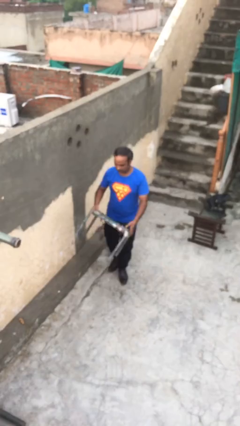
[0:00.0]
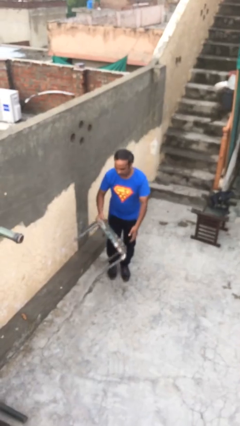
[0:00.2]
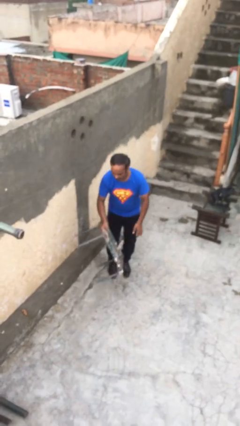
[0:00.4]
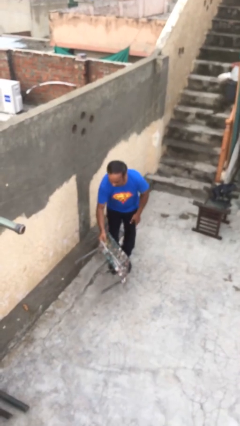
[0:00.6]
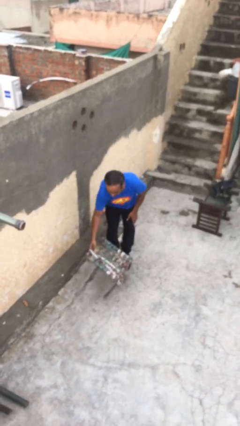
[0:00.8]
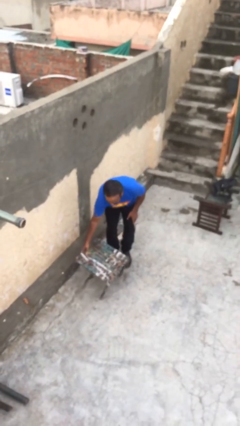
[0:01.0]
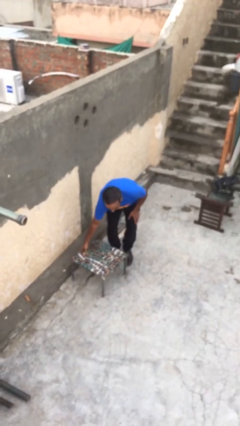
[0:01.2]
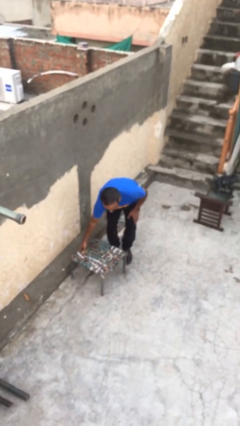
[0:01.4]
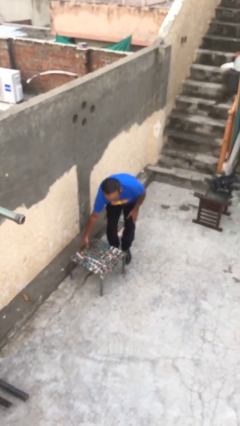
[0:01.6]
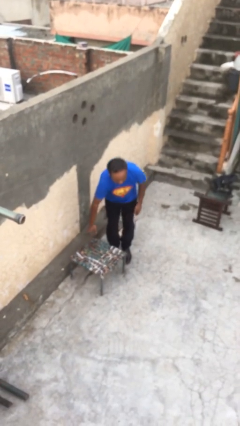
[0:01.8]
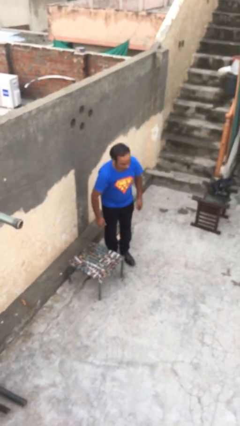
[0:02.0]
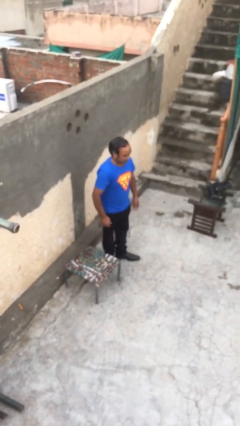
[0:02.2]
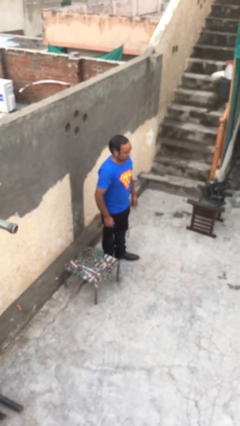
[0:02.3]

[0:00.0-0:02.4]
person puts down object on floor

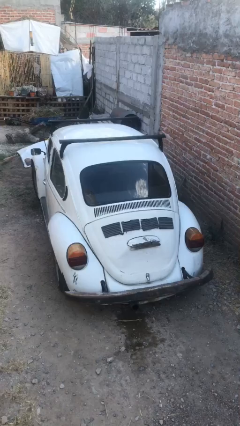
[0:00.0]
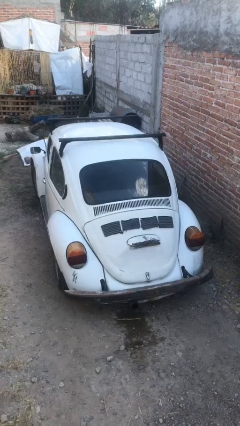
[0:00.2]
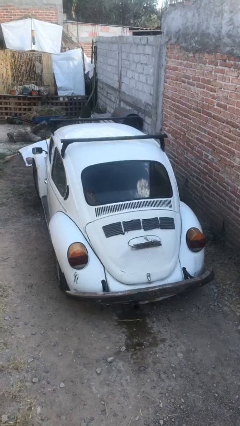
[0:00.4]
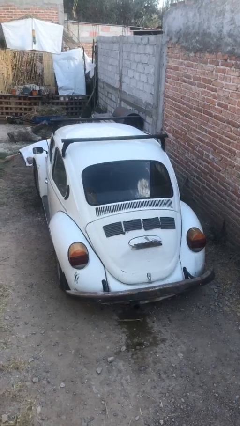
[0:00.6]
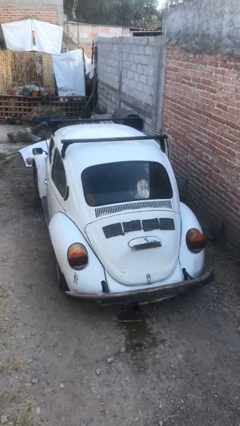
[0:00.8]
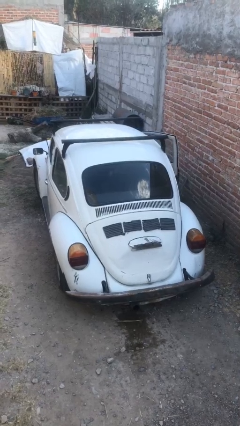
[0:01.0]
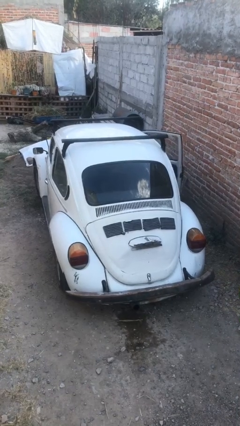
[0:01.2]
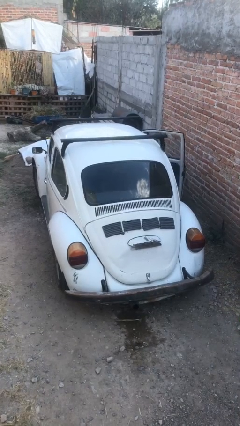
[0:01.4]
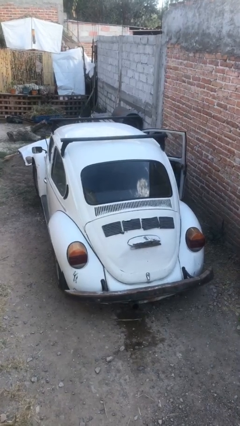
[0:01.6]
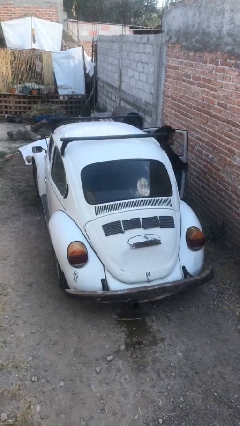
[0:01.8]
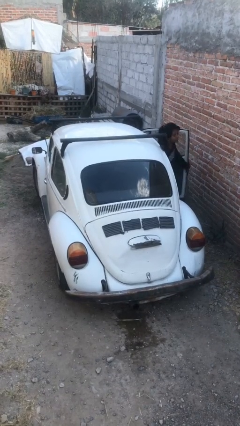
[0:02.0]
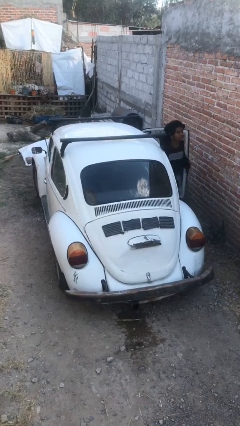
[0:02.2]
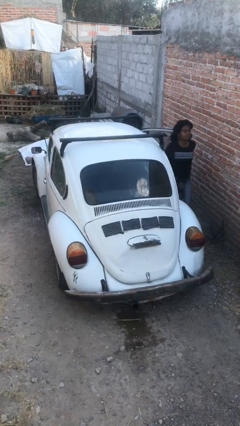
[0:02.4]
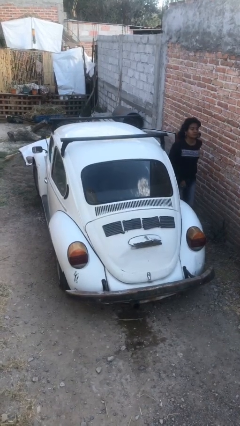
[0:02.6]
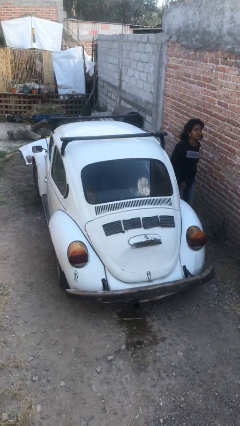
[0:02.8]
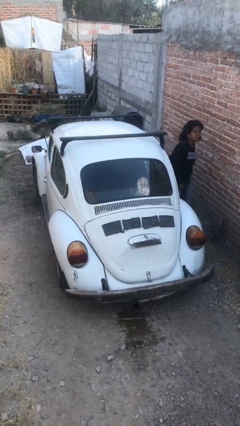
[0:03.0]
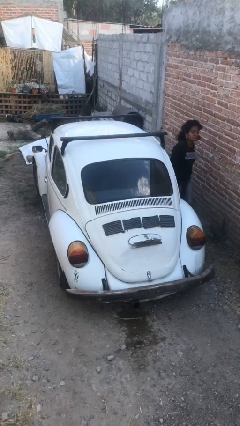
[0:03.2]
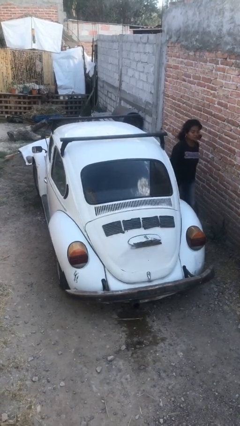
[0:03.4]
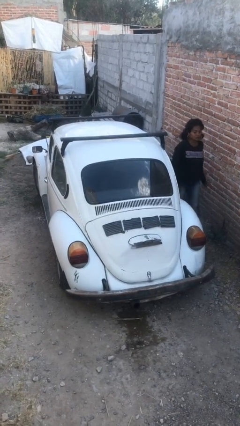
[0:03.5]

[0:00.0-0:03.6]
car drops off person

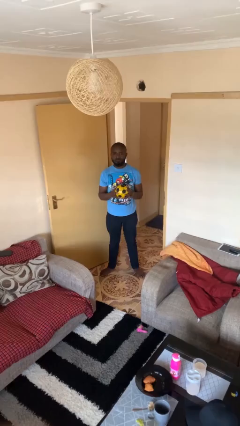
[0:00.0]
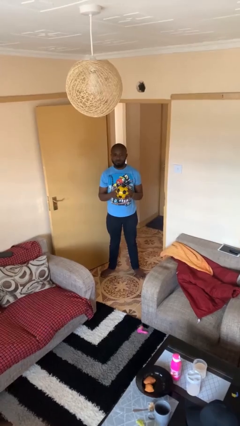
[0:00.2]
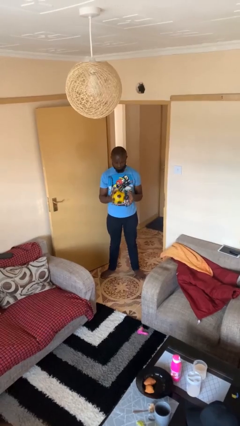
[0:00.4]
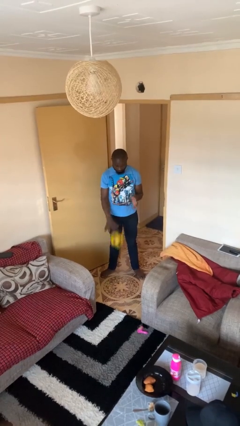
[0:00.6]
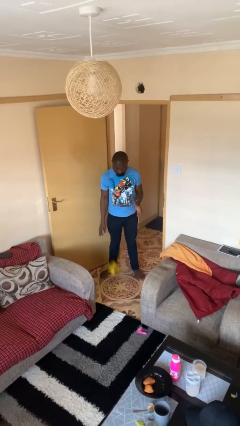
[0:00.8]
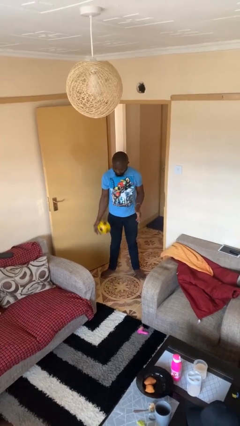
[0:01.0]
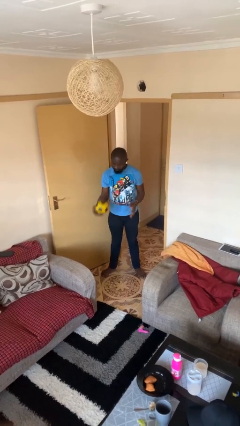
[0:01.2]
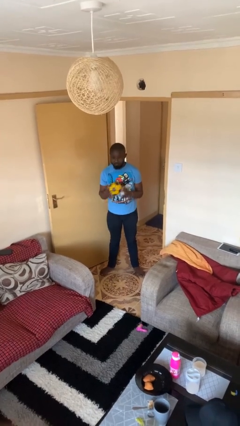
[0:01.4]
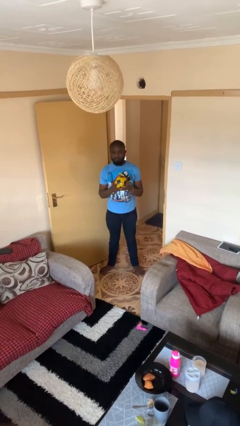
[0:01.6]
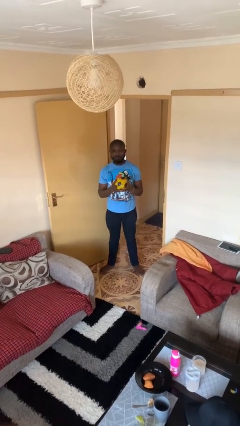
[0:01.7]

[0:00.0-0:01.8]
person bounces ball on floor

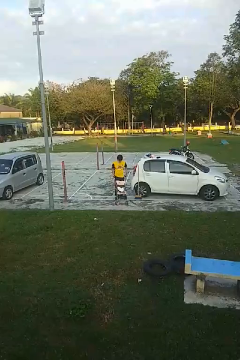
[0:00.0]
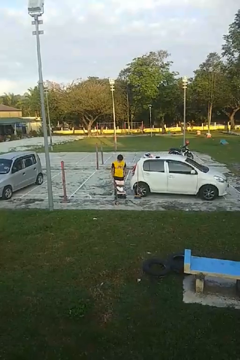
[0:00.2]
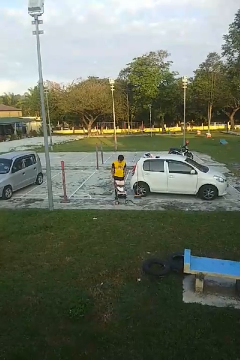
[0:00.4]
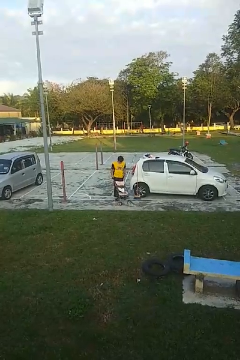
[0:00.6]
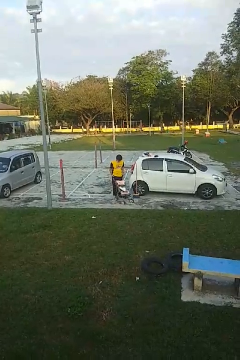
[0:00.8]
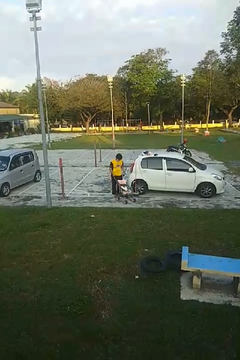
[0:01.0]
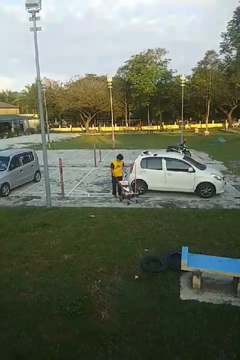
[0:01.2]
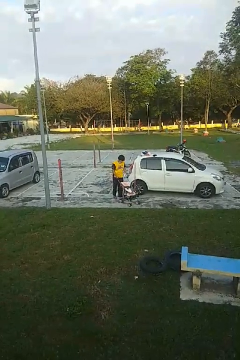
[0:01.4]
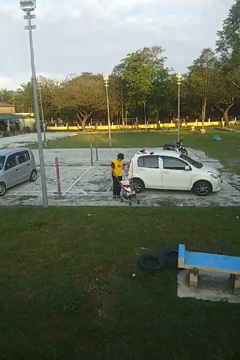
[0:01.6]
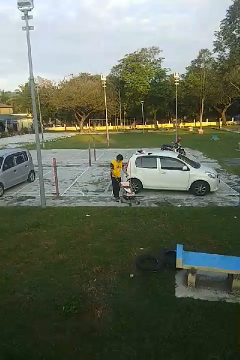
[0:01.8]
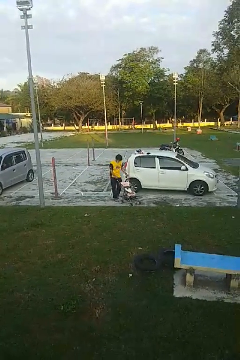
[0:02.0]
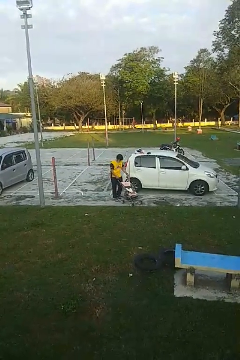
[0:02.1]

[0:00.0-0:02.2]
person pushes wheeled cart

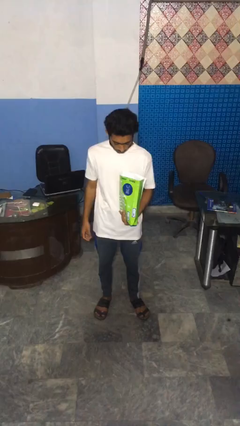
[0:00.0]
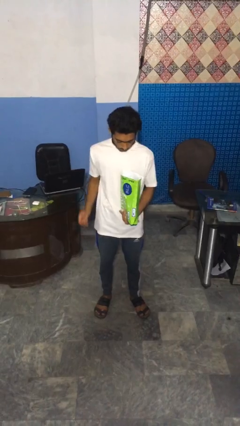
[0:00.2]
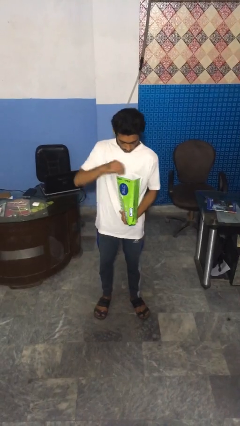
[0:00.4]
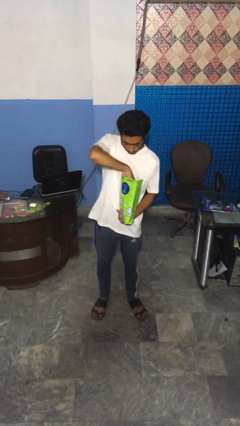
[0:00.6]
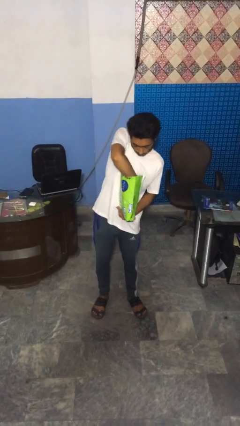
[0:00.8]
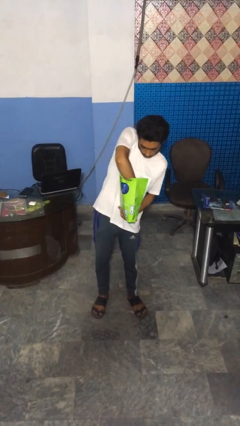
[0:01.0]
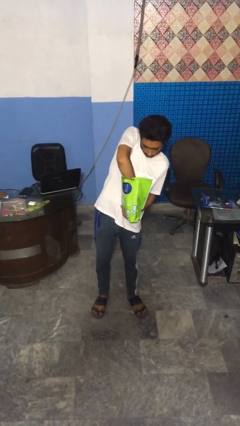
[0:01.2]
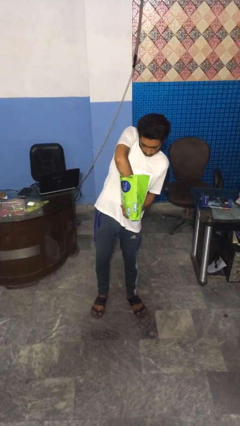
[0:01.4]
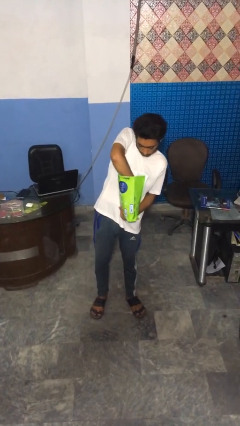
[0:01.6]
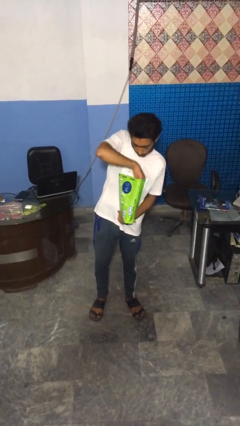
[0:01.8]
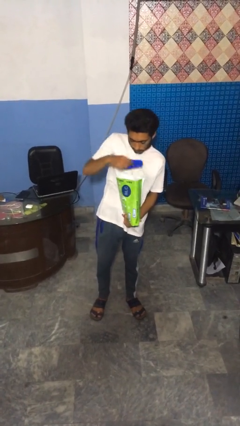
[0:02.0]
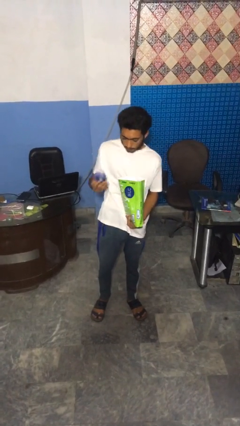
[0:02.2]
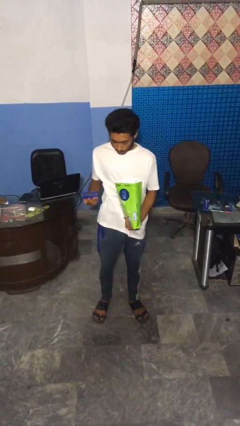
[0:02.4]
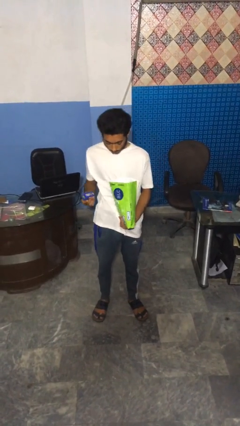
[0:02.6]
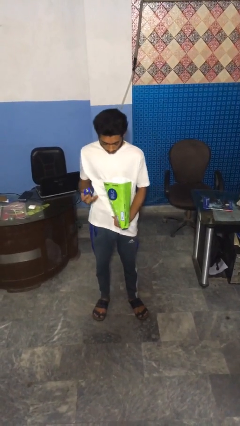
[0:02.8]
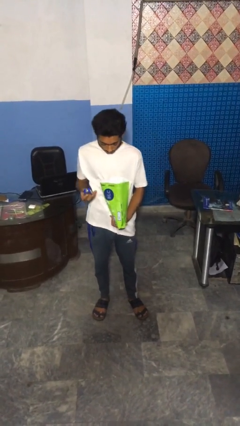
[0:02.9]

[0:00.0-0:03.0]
person takes object from bag

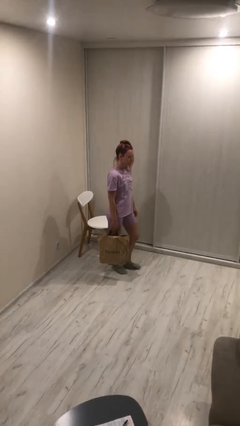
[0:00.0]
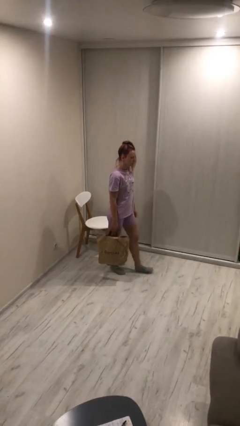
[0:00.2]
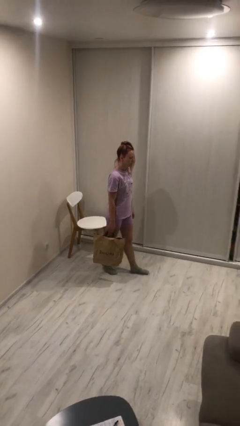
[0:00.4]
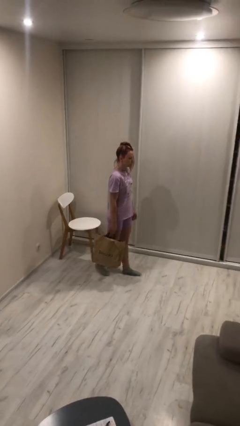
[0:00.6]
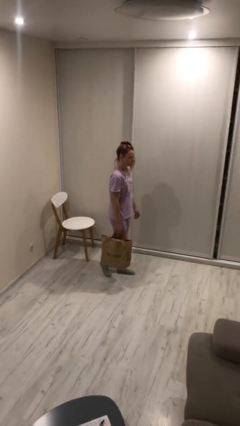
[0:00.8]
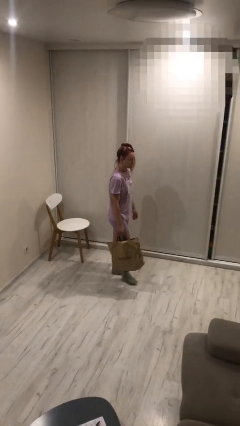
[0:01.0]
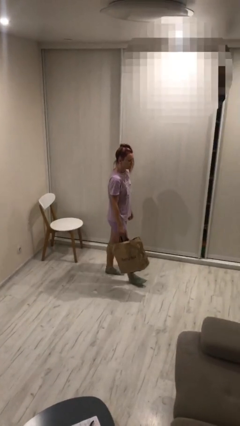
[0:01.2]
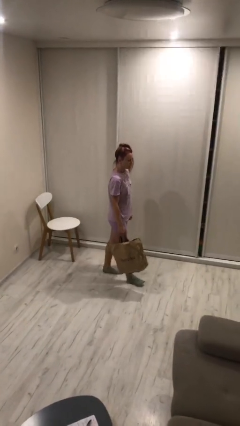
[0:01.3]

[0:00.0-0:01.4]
person carries groceries

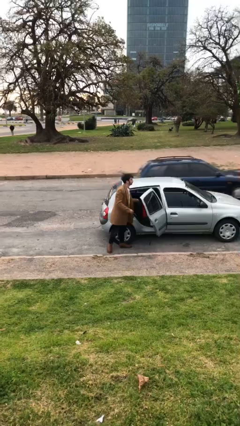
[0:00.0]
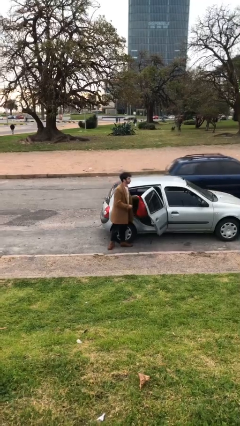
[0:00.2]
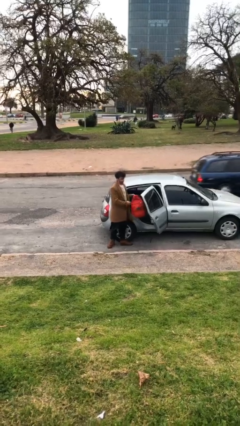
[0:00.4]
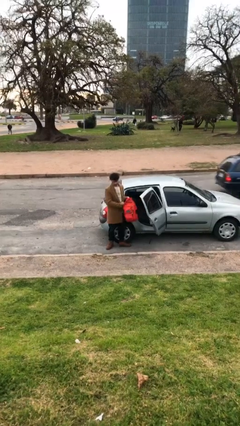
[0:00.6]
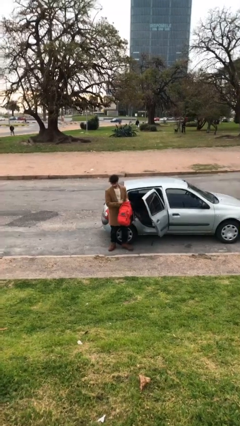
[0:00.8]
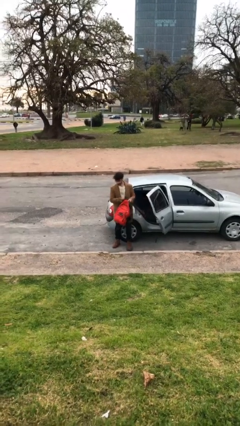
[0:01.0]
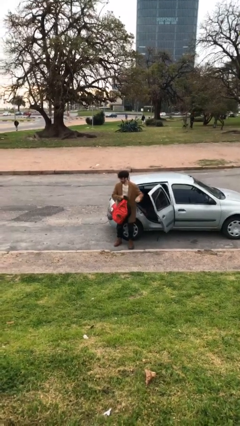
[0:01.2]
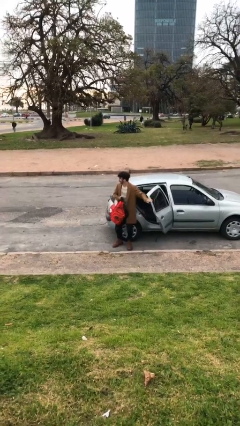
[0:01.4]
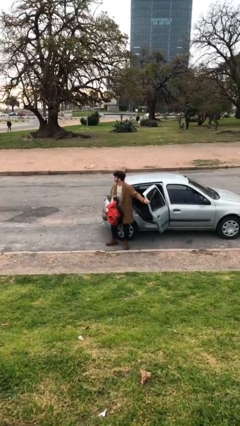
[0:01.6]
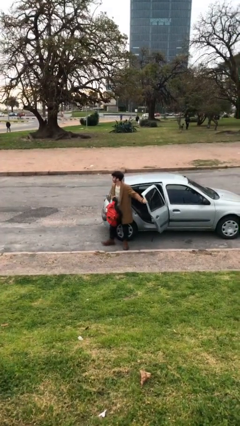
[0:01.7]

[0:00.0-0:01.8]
person unloads car

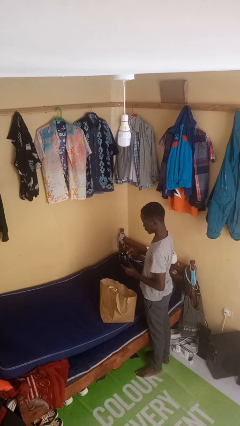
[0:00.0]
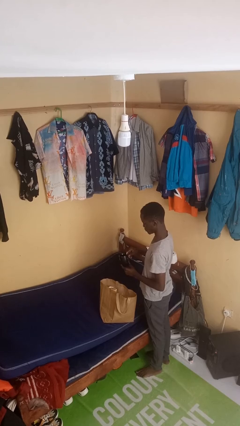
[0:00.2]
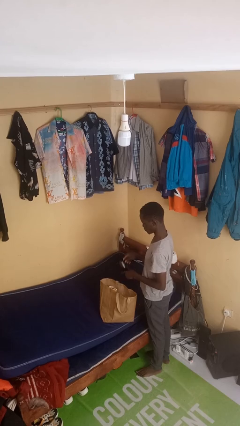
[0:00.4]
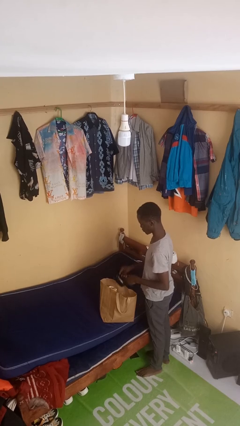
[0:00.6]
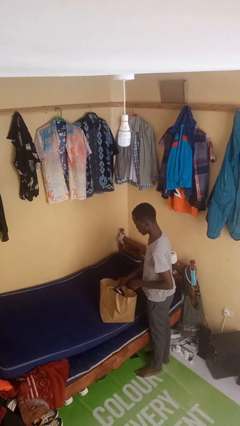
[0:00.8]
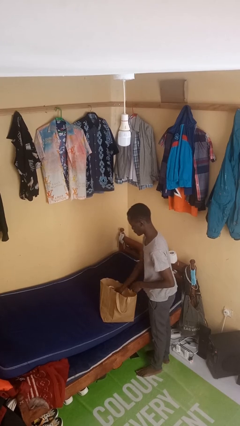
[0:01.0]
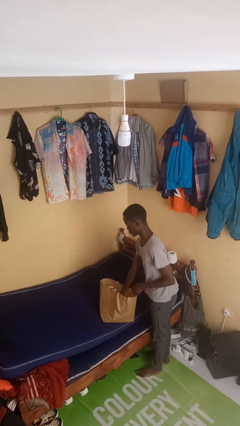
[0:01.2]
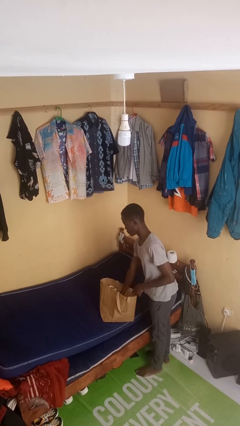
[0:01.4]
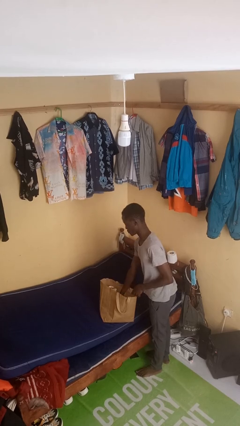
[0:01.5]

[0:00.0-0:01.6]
person puts object into bag
